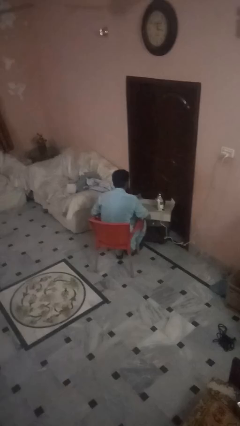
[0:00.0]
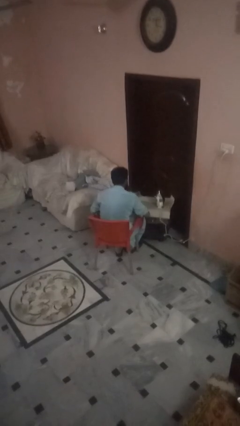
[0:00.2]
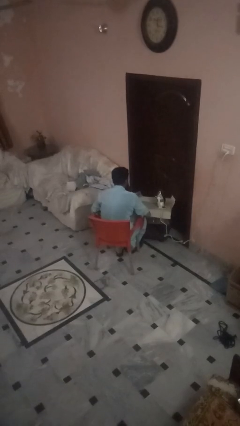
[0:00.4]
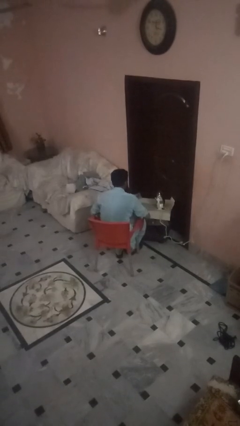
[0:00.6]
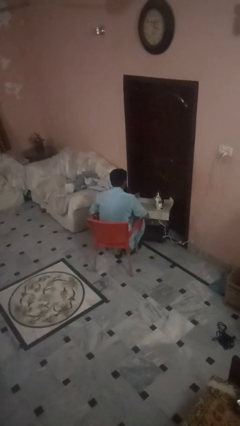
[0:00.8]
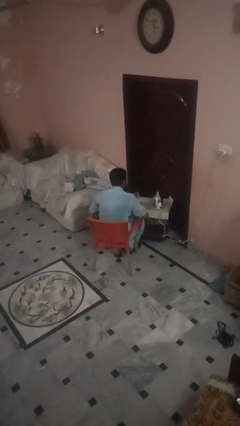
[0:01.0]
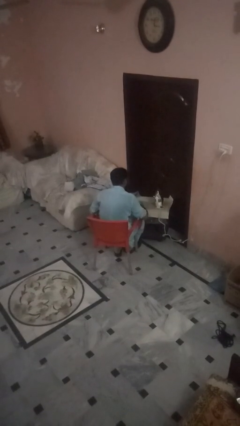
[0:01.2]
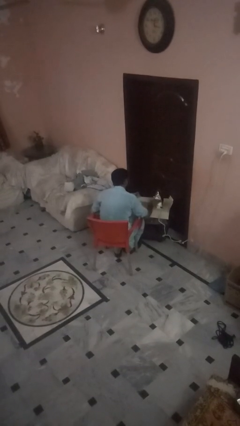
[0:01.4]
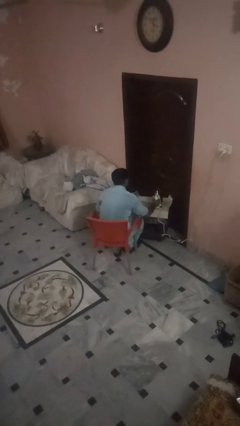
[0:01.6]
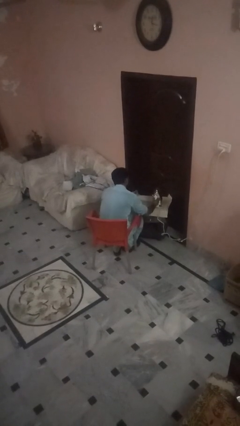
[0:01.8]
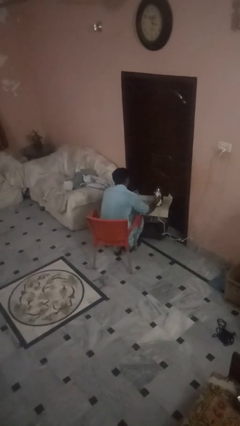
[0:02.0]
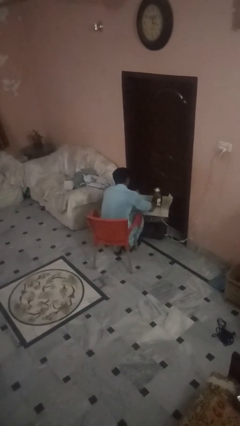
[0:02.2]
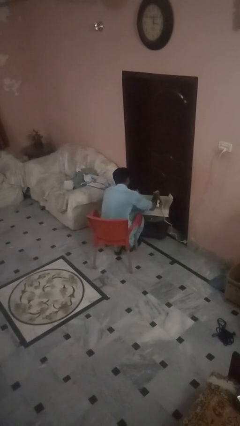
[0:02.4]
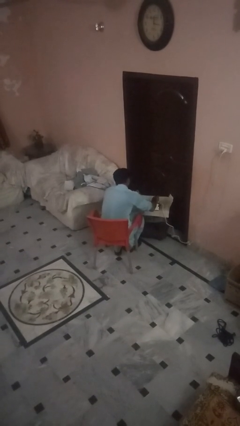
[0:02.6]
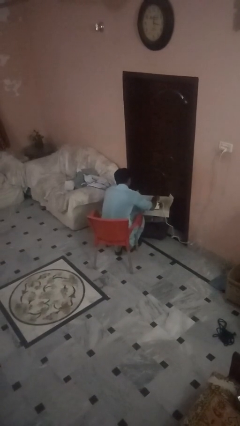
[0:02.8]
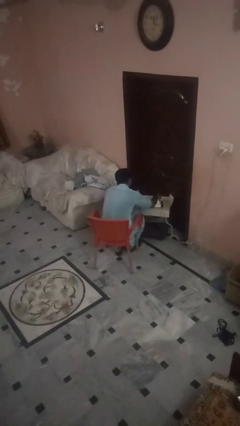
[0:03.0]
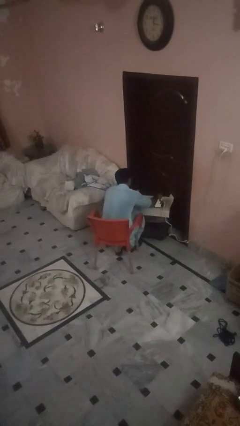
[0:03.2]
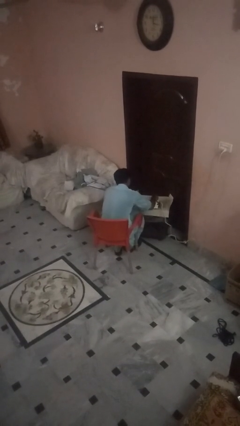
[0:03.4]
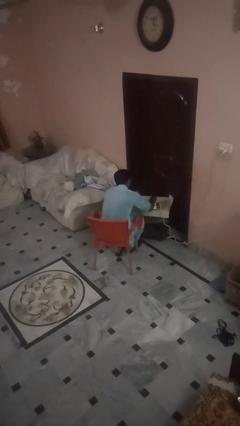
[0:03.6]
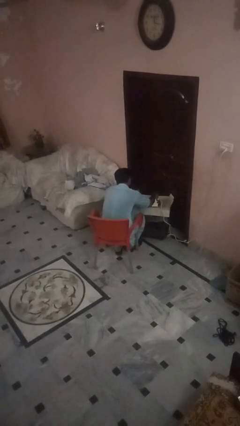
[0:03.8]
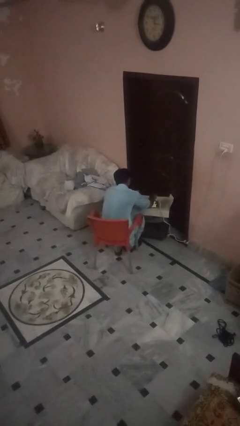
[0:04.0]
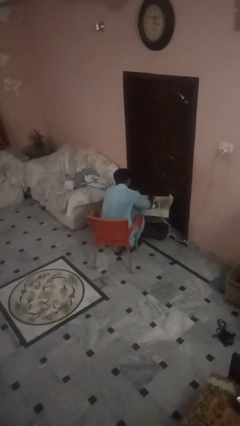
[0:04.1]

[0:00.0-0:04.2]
person irons clothes

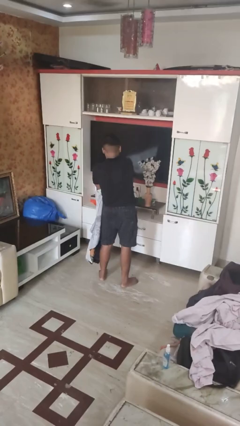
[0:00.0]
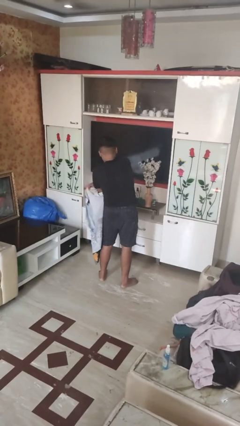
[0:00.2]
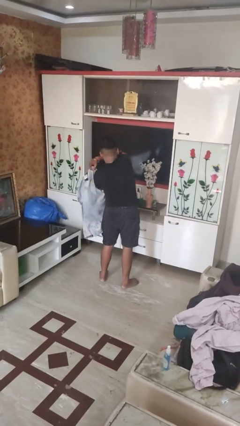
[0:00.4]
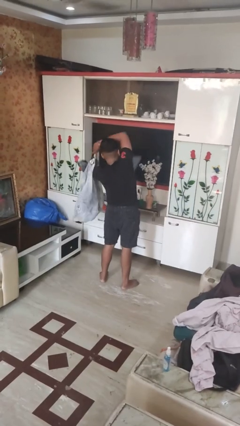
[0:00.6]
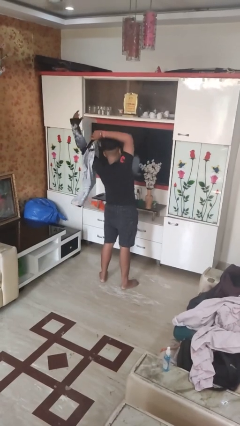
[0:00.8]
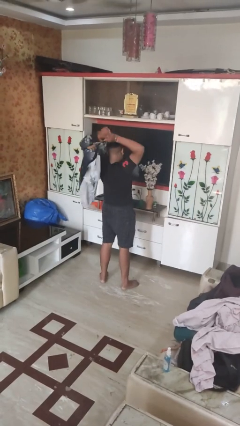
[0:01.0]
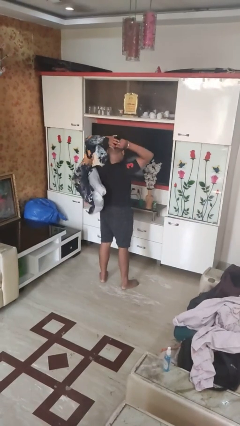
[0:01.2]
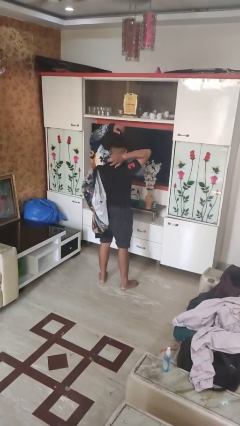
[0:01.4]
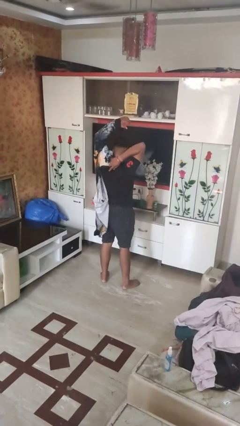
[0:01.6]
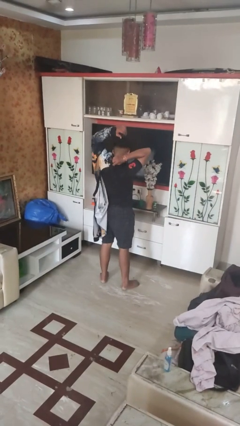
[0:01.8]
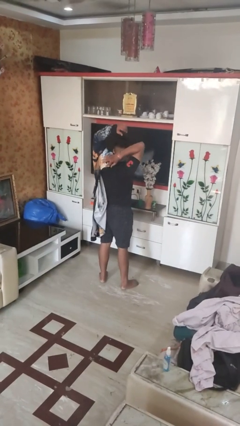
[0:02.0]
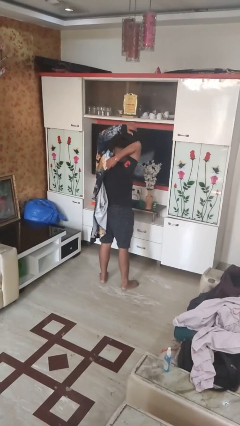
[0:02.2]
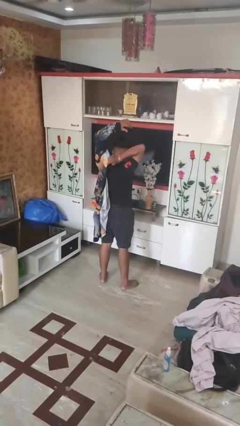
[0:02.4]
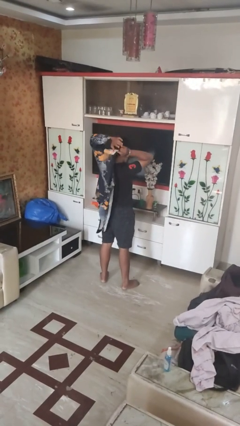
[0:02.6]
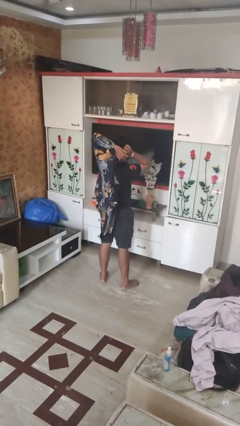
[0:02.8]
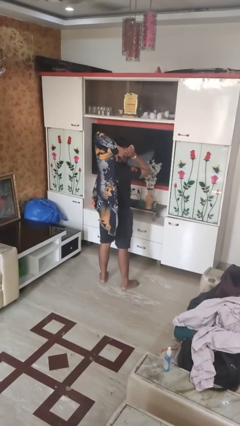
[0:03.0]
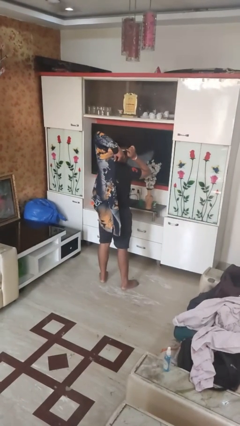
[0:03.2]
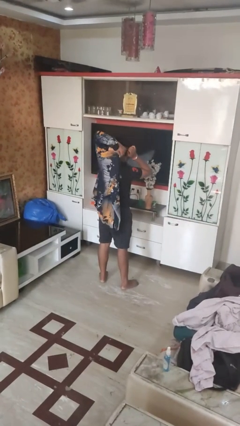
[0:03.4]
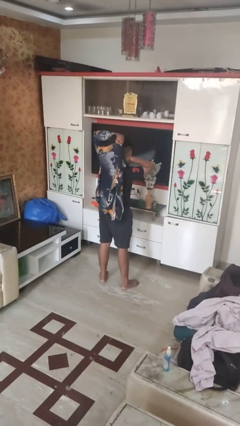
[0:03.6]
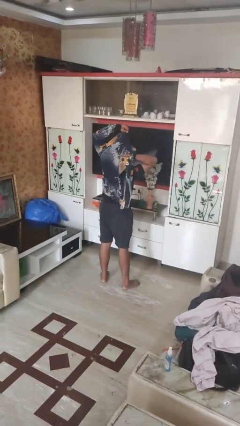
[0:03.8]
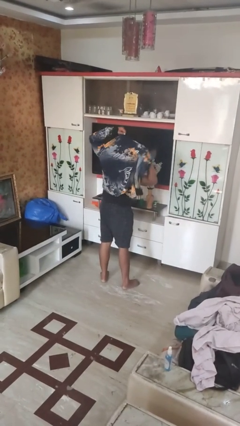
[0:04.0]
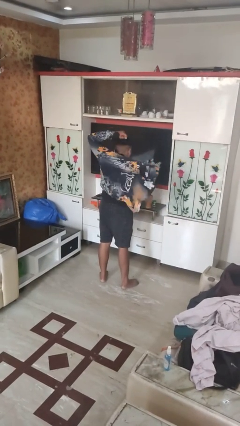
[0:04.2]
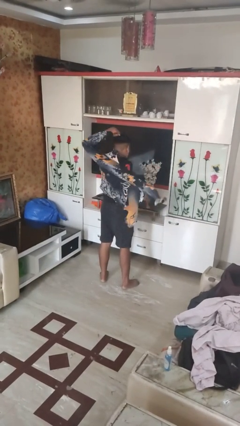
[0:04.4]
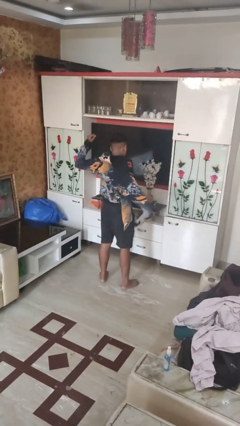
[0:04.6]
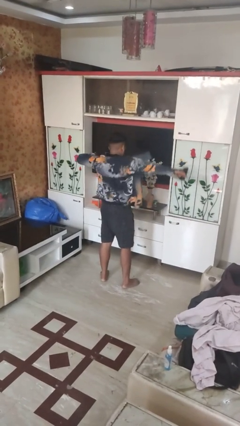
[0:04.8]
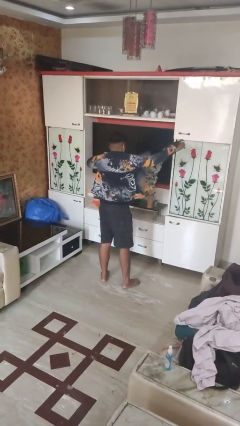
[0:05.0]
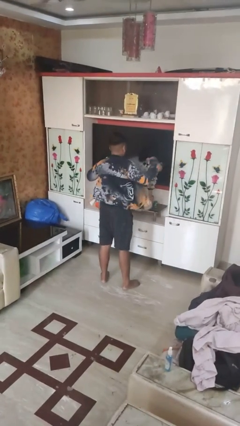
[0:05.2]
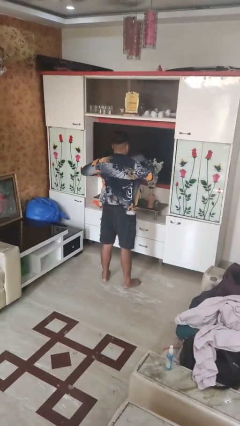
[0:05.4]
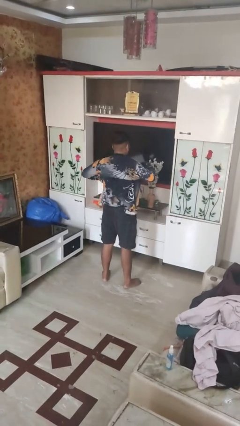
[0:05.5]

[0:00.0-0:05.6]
person puts on shirt

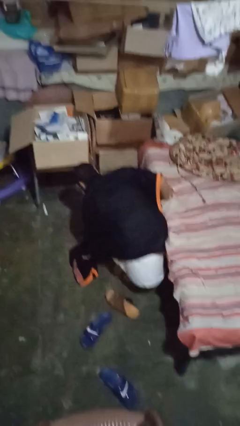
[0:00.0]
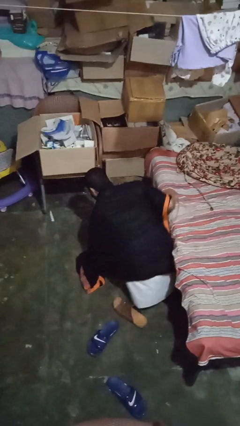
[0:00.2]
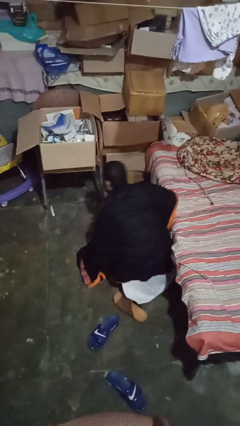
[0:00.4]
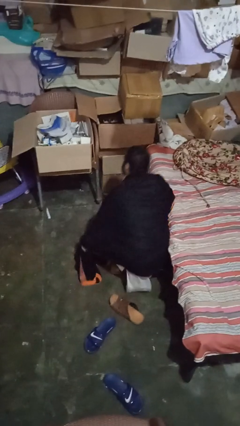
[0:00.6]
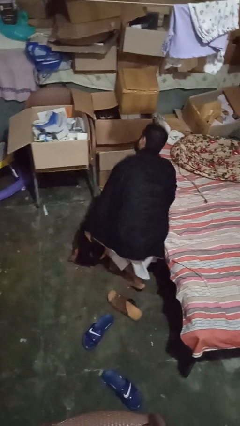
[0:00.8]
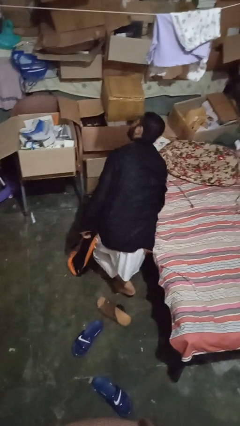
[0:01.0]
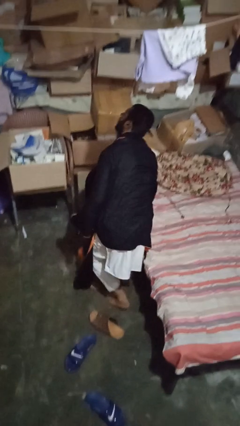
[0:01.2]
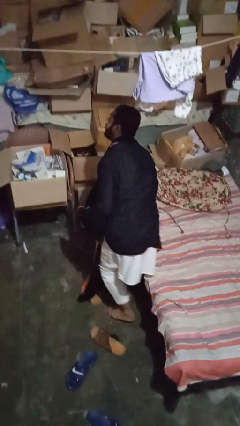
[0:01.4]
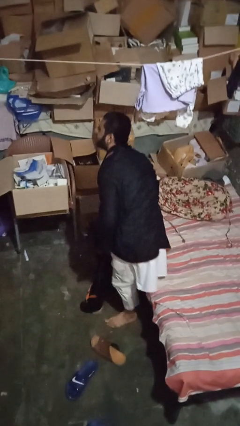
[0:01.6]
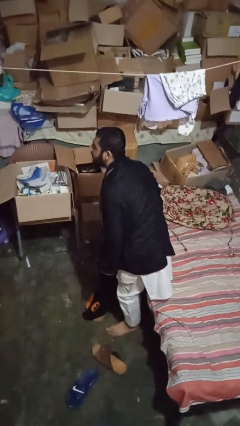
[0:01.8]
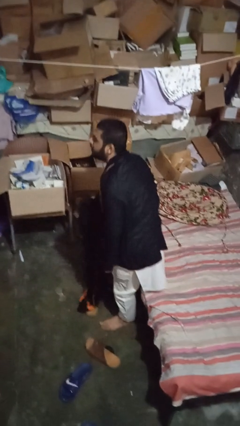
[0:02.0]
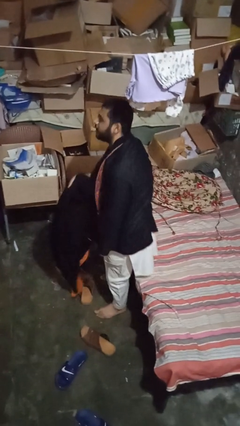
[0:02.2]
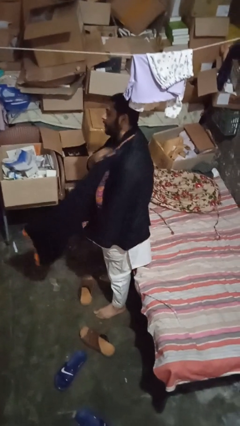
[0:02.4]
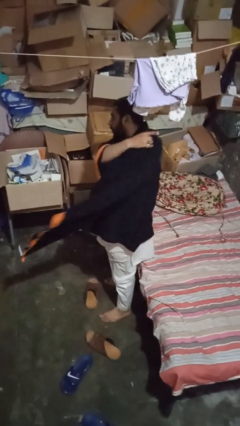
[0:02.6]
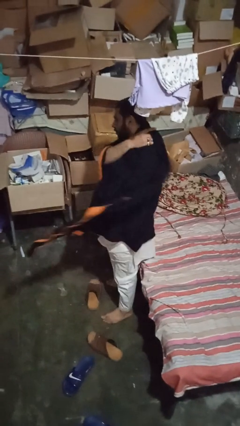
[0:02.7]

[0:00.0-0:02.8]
person stands up from floor

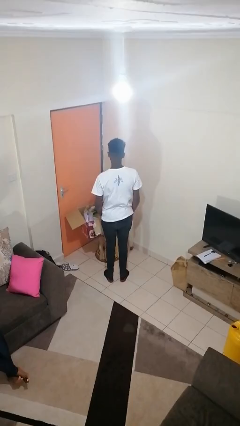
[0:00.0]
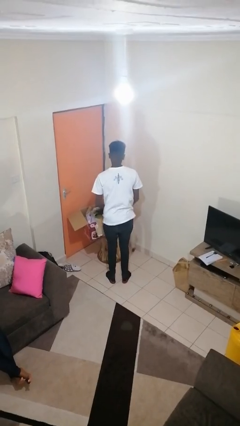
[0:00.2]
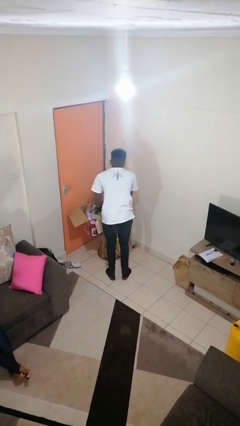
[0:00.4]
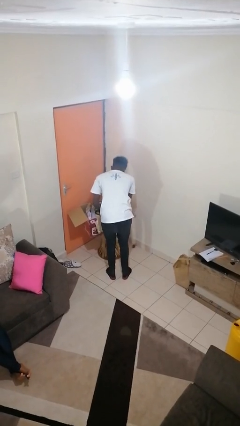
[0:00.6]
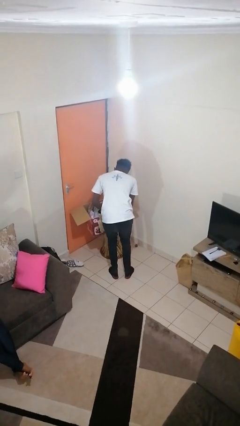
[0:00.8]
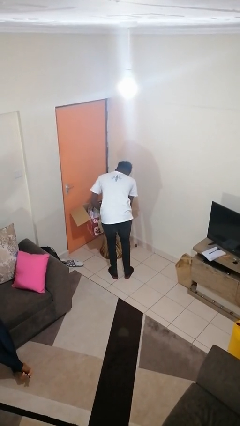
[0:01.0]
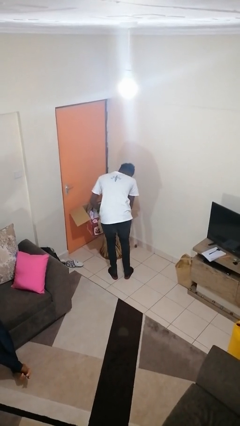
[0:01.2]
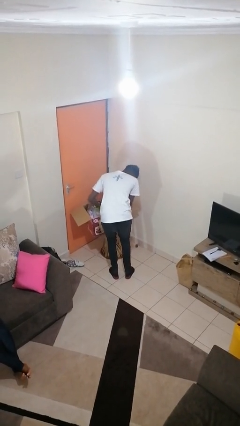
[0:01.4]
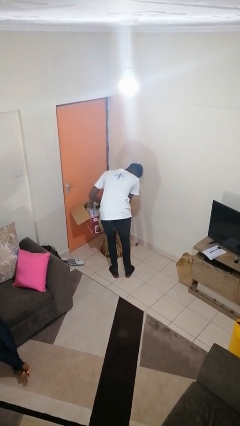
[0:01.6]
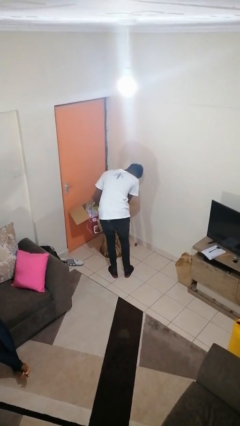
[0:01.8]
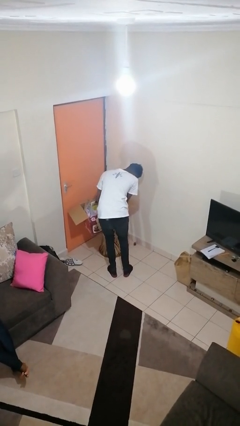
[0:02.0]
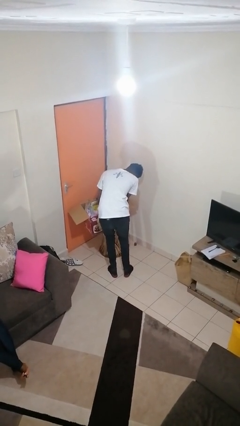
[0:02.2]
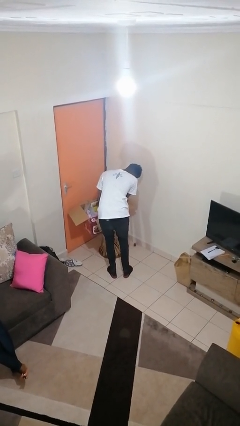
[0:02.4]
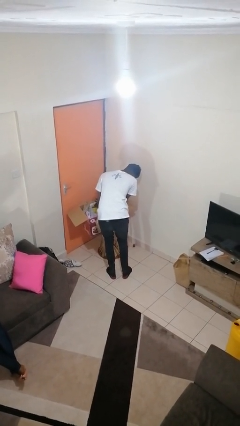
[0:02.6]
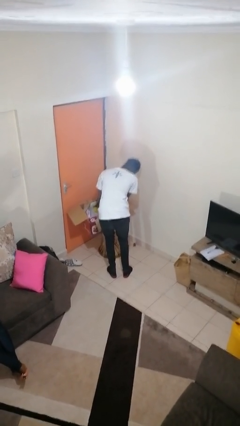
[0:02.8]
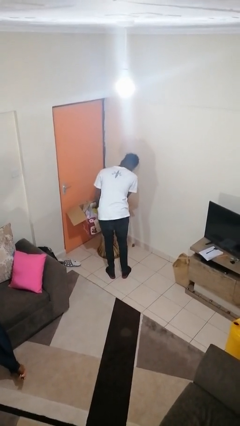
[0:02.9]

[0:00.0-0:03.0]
person searches in box

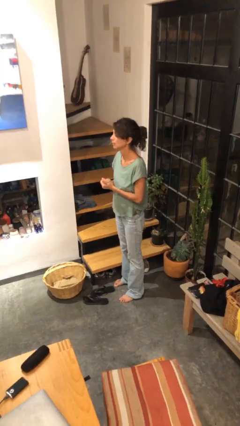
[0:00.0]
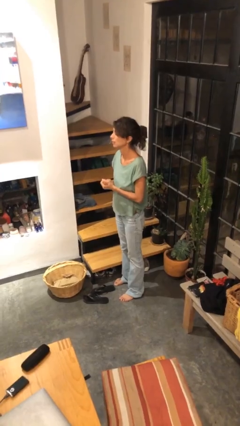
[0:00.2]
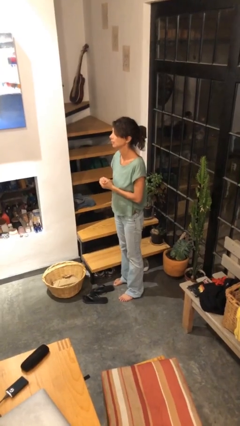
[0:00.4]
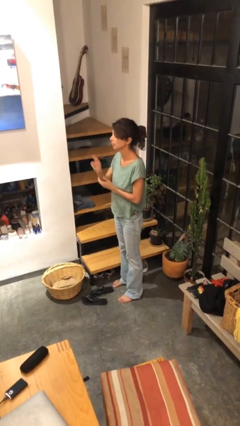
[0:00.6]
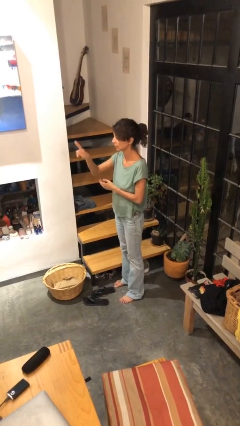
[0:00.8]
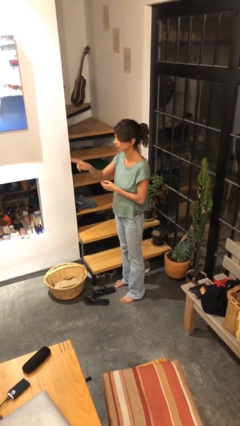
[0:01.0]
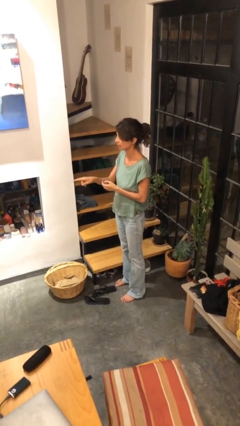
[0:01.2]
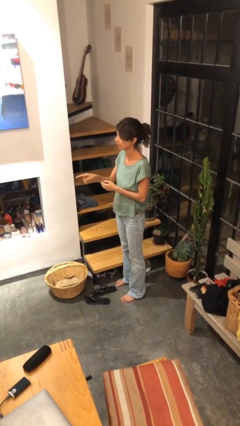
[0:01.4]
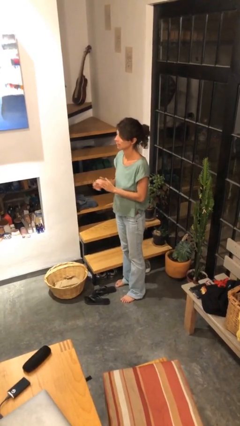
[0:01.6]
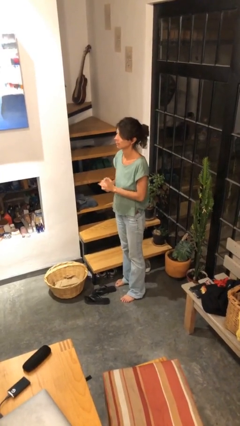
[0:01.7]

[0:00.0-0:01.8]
person gestures swipe down
